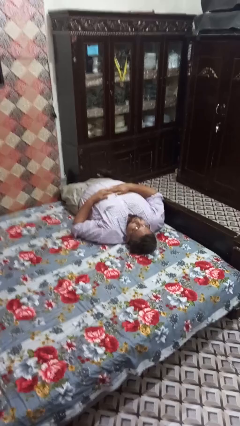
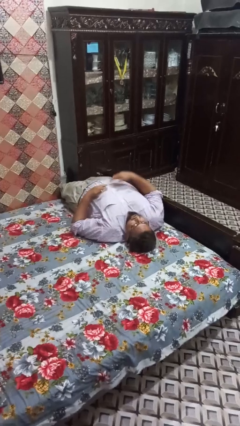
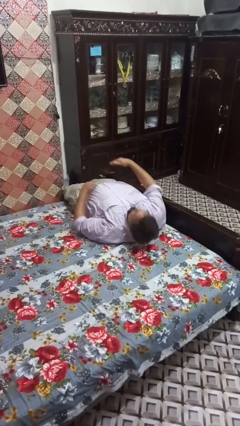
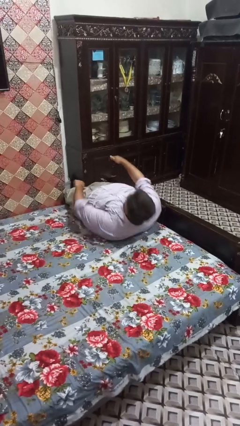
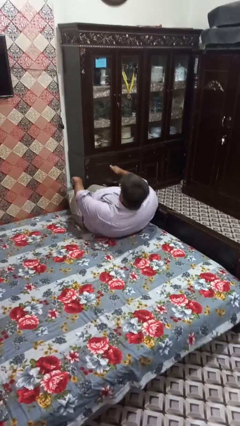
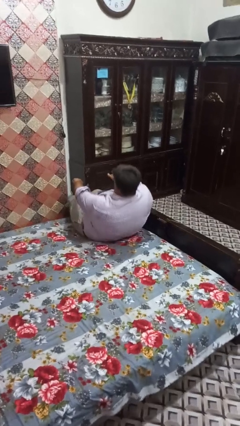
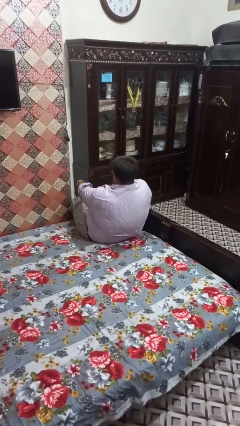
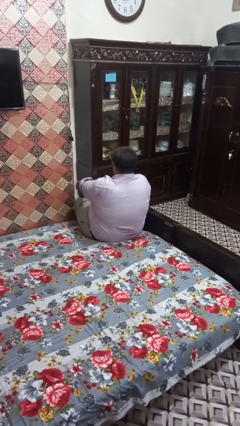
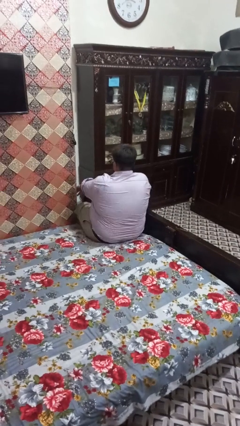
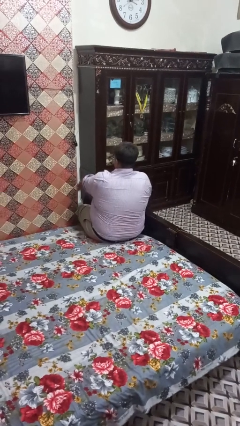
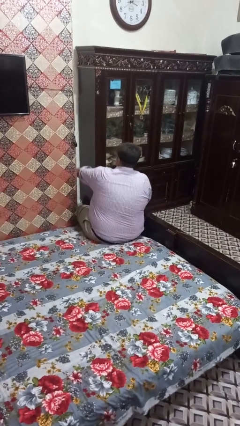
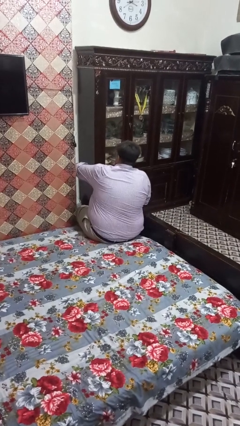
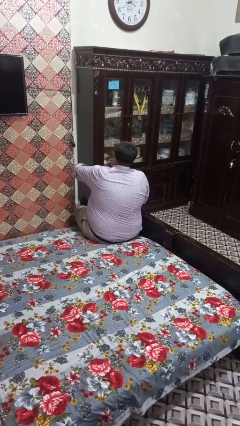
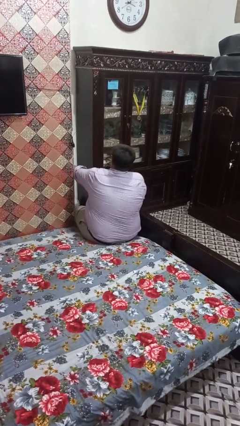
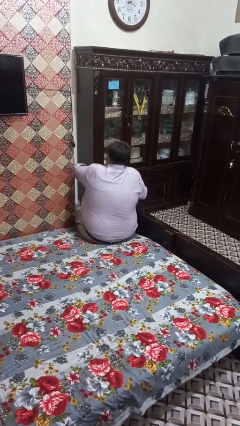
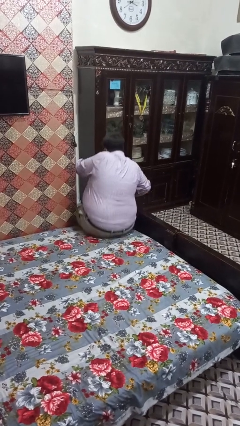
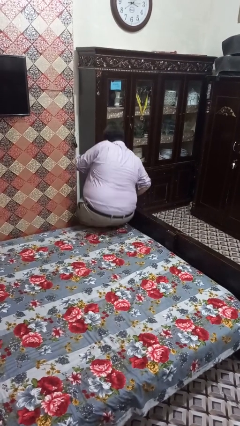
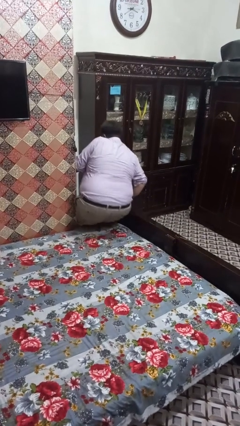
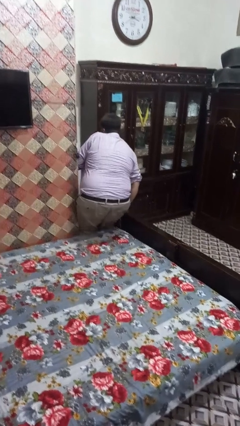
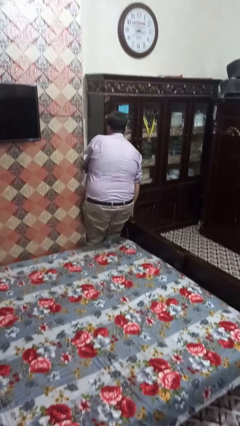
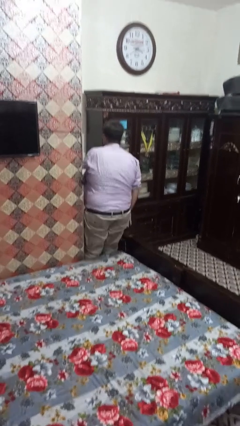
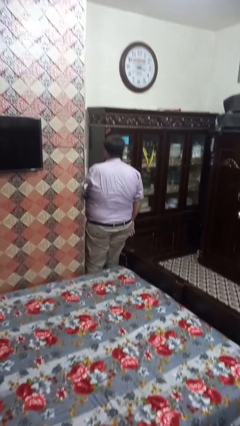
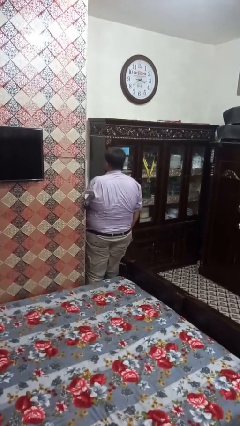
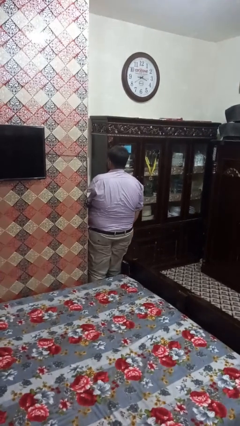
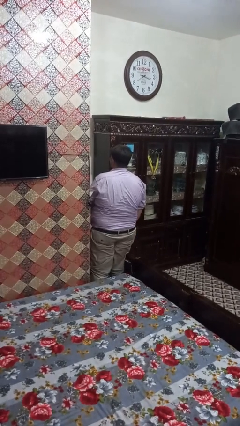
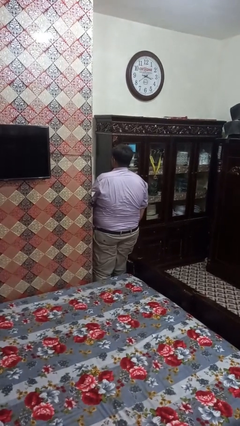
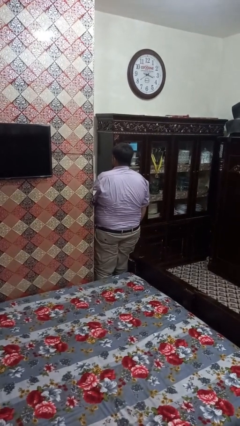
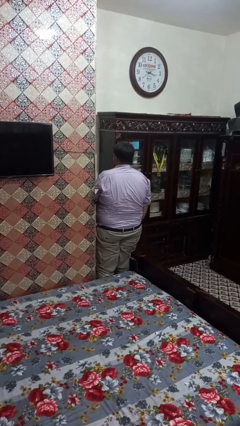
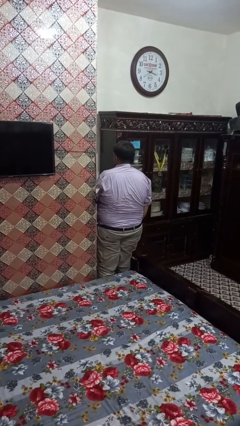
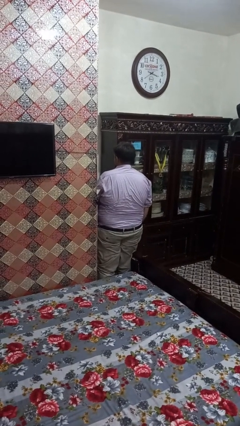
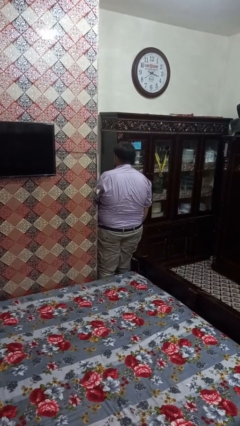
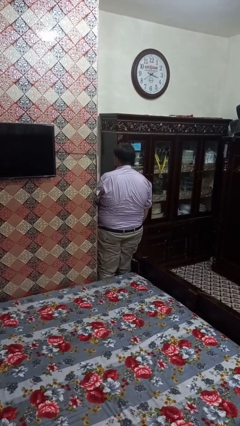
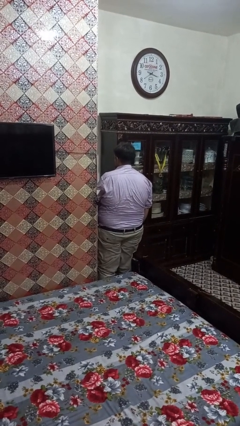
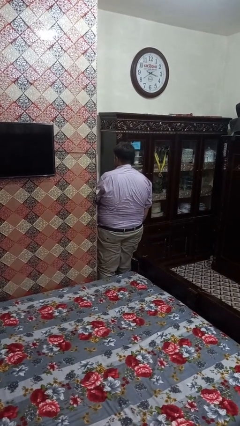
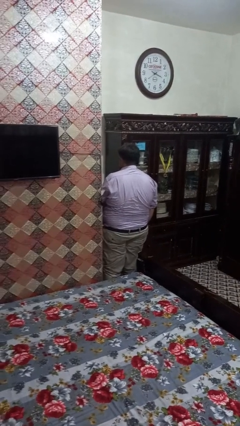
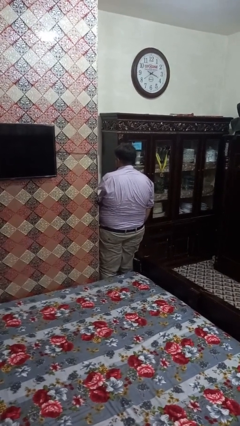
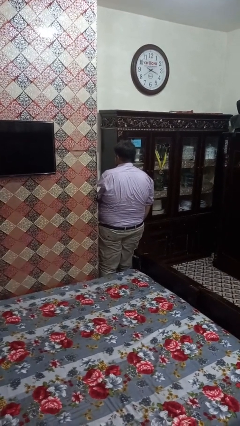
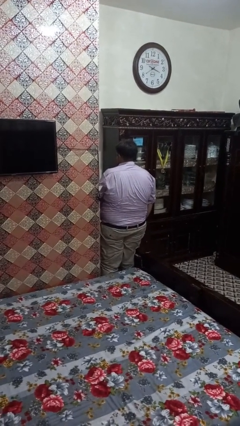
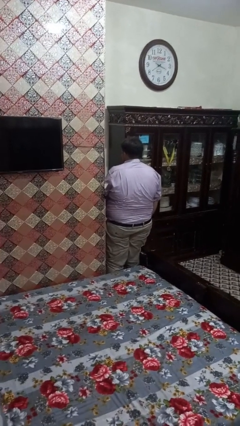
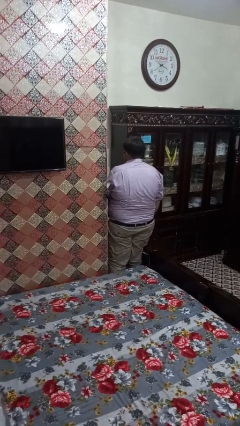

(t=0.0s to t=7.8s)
person stands up

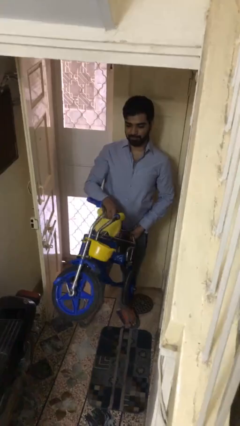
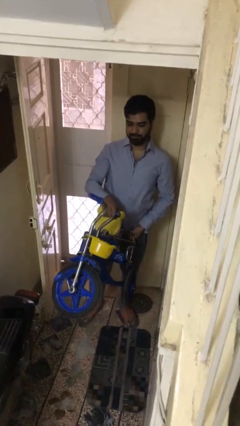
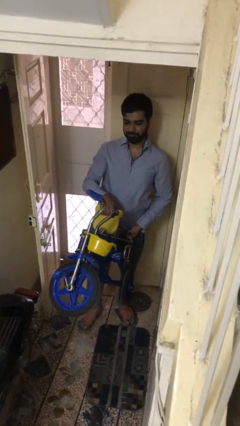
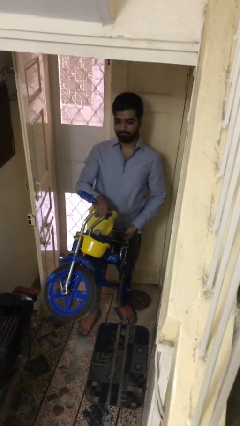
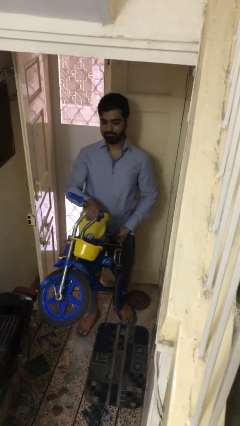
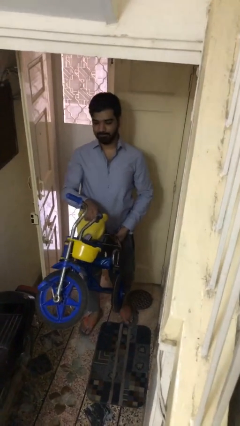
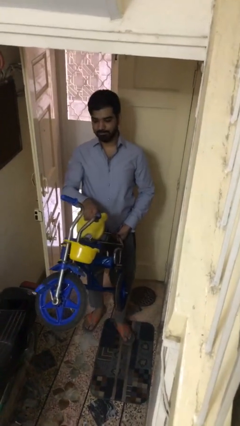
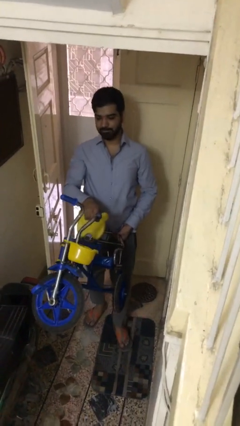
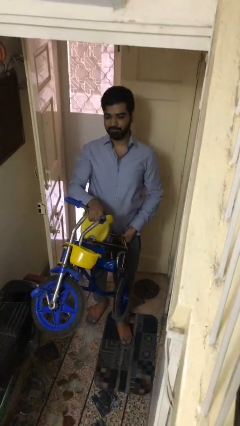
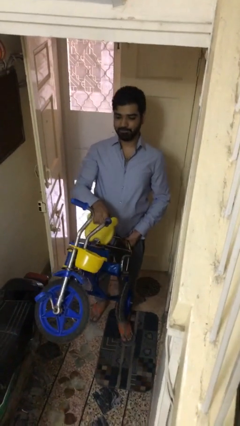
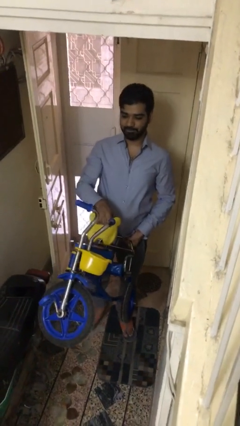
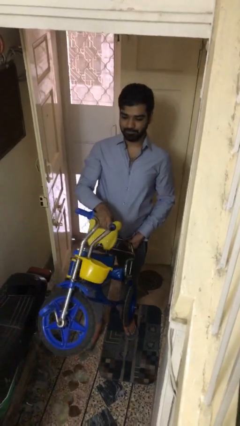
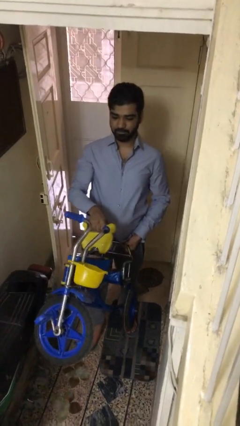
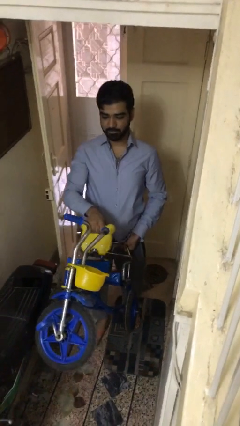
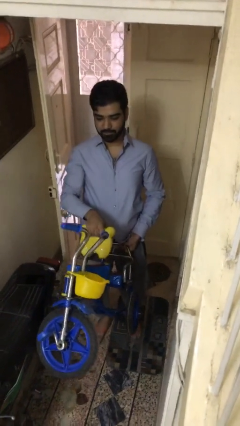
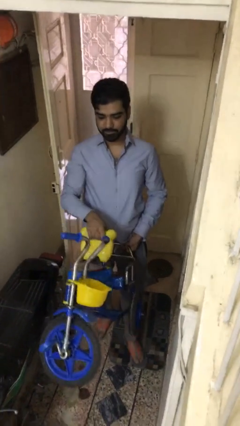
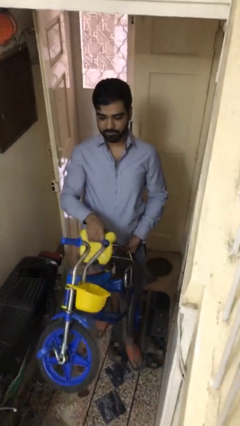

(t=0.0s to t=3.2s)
person carries heavy object

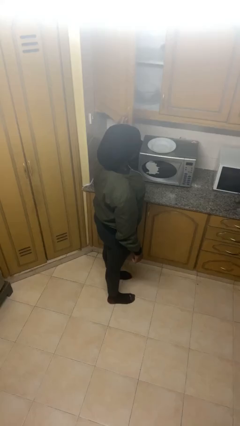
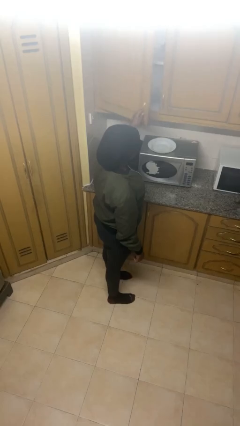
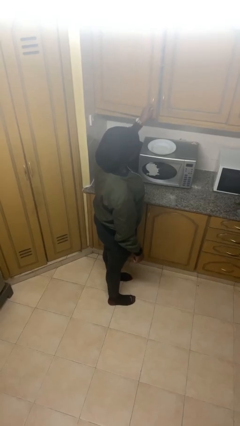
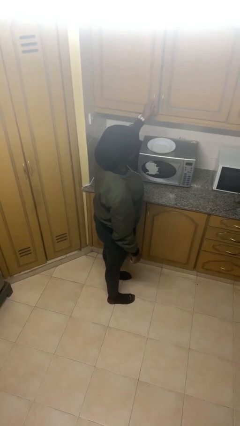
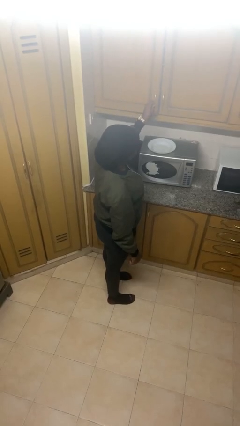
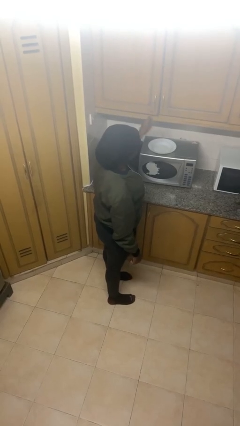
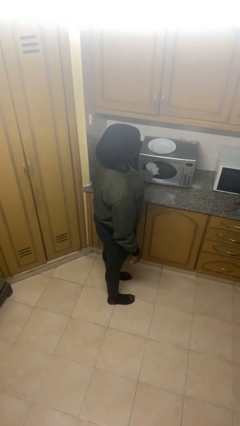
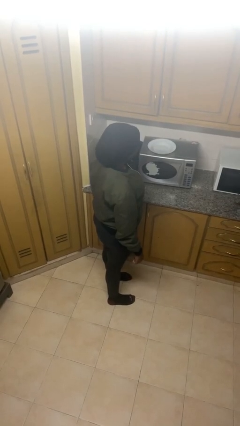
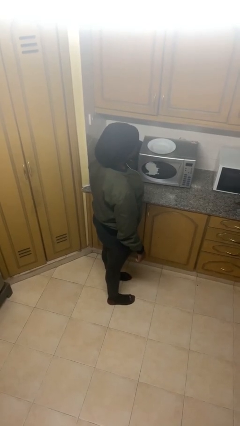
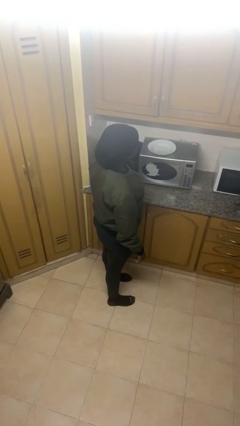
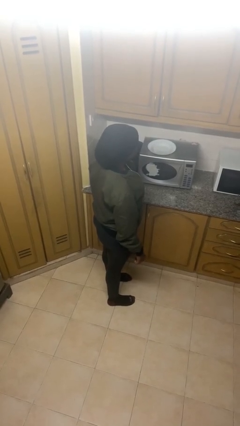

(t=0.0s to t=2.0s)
person closes cabinet

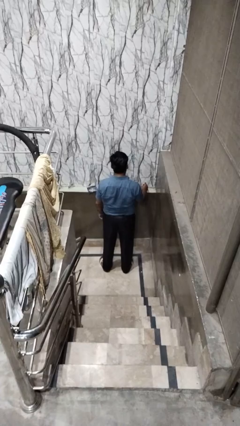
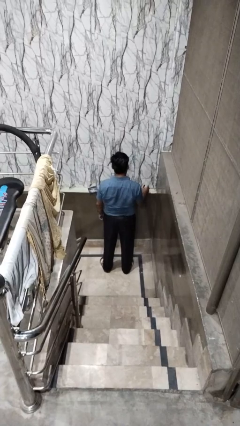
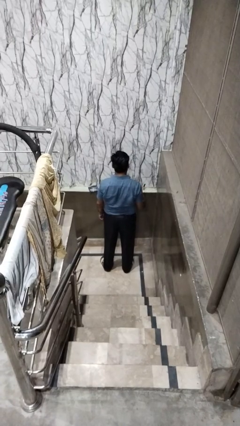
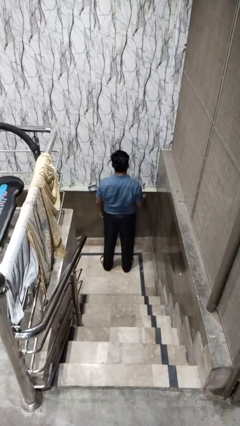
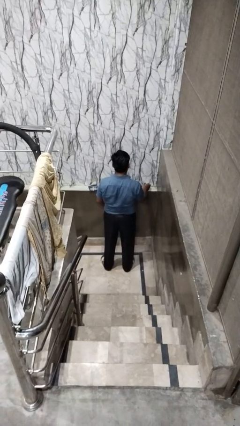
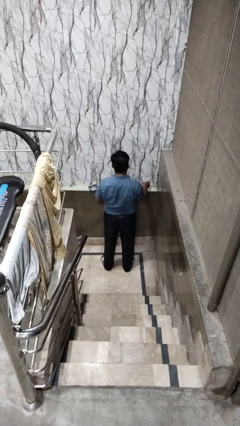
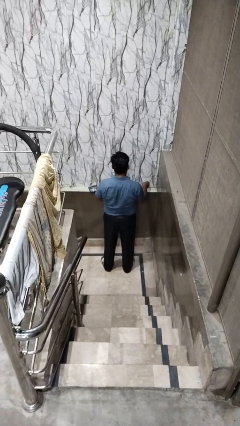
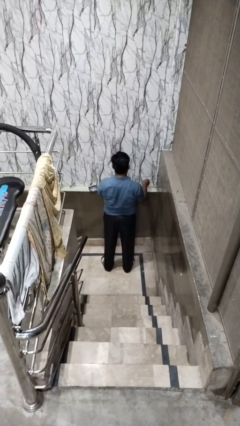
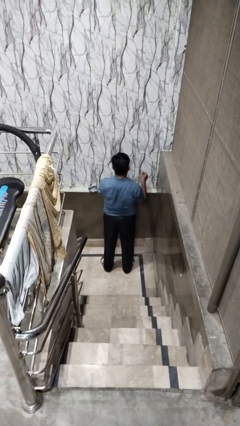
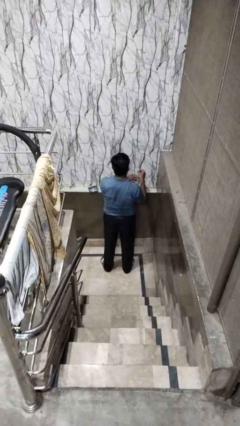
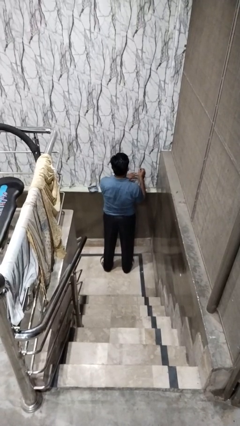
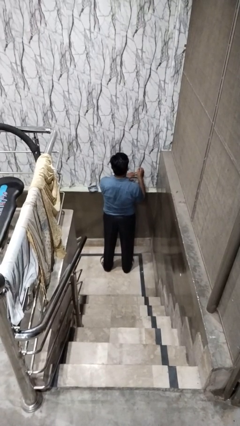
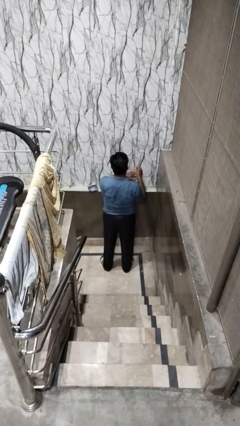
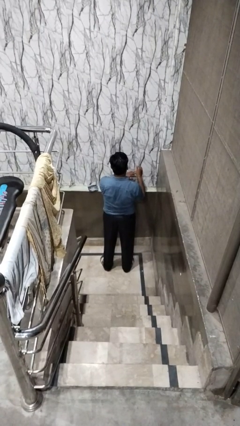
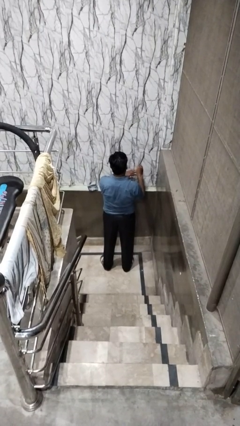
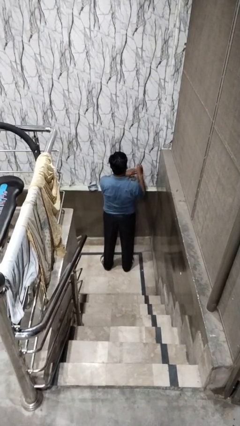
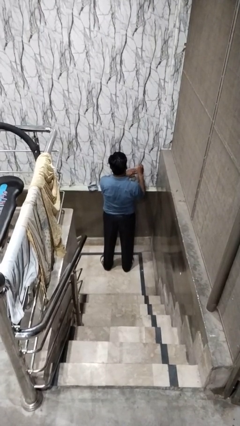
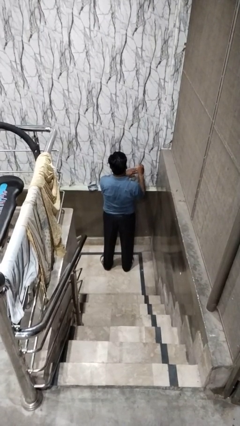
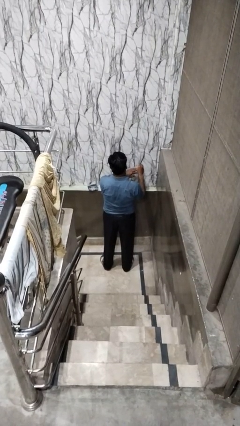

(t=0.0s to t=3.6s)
person paints fingernails

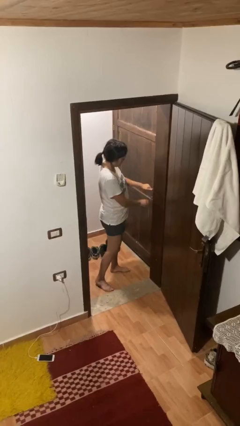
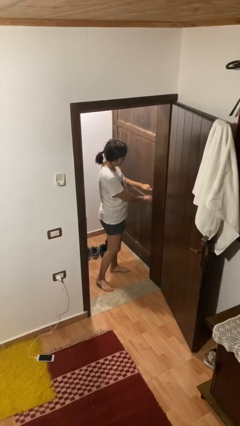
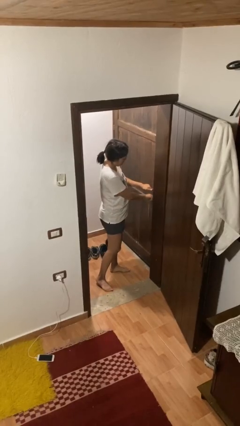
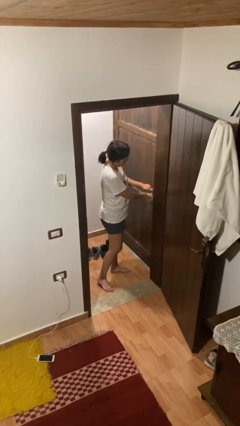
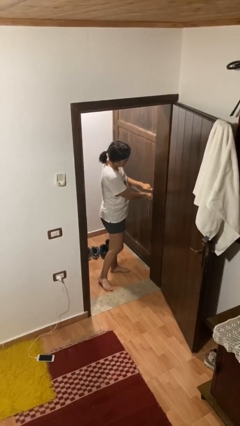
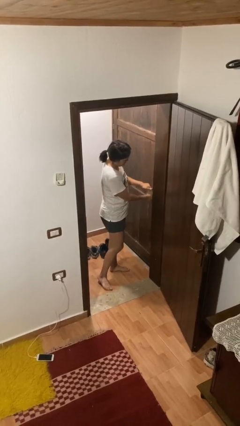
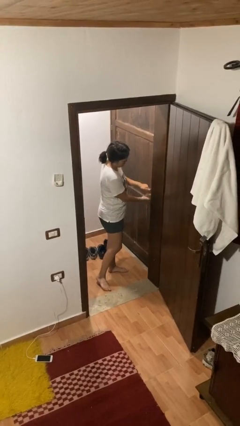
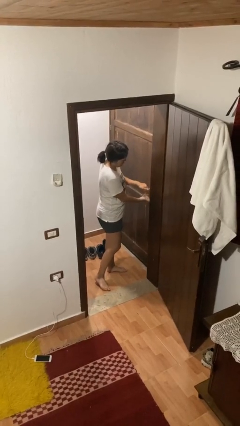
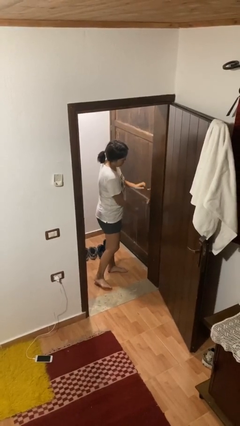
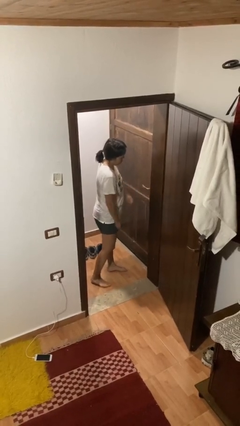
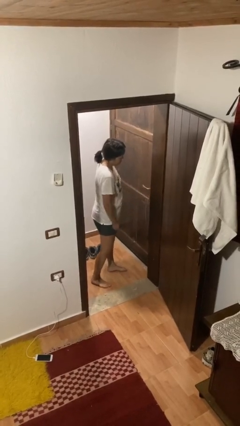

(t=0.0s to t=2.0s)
person locks door with keys
